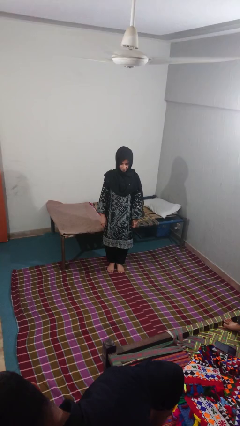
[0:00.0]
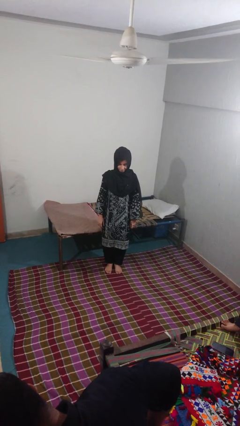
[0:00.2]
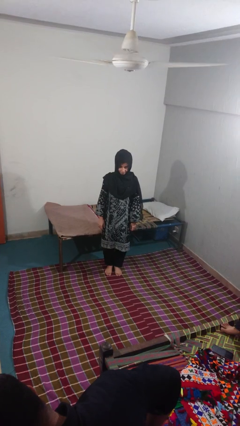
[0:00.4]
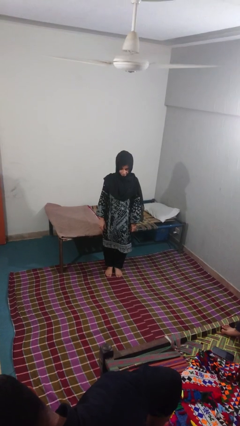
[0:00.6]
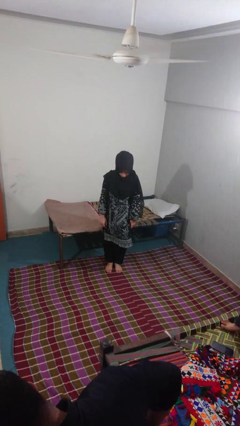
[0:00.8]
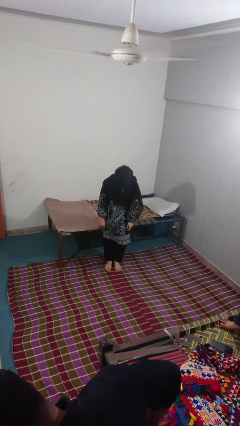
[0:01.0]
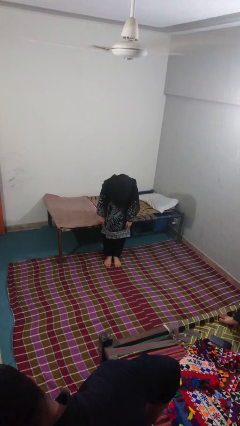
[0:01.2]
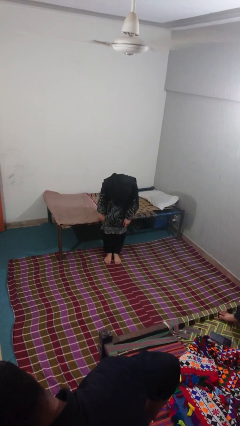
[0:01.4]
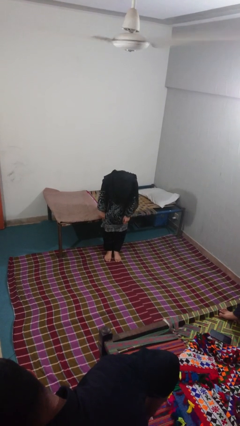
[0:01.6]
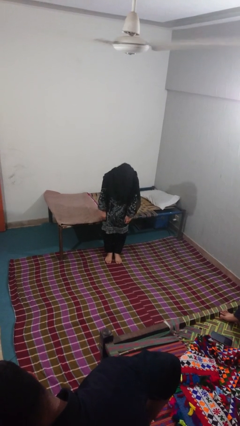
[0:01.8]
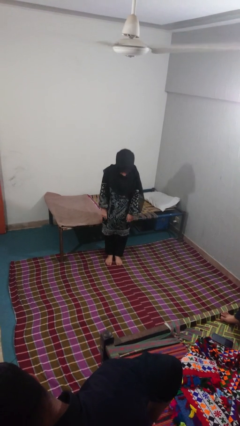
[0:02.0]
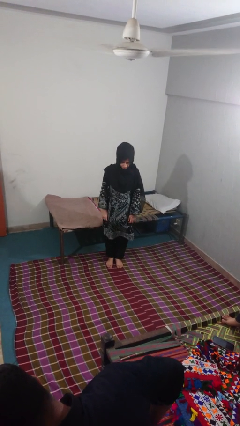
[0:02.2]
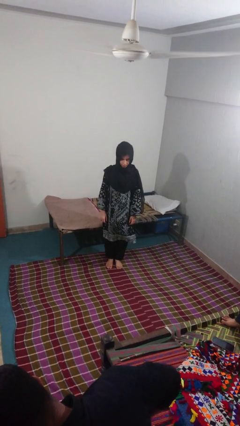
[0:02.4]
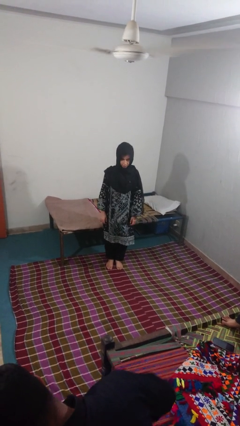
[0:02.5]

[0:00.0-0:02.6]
person bows

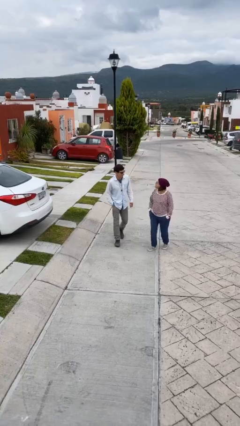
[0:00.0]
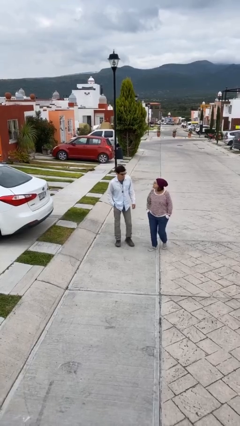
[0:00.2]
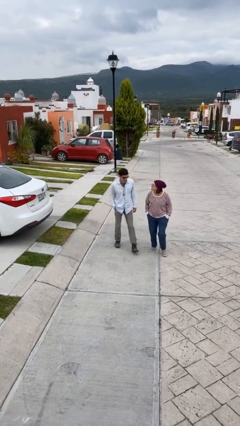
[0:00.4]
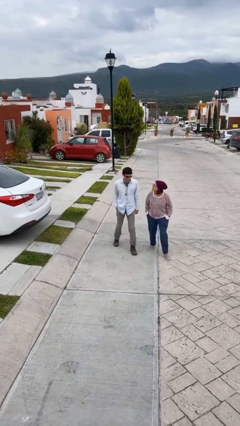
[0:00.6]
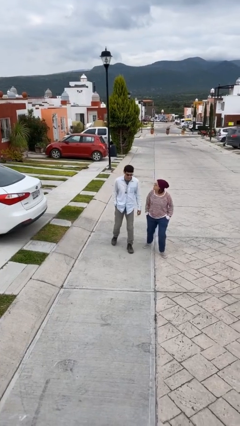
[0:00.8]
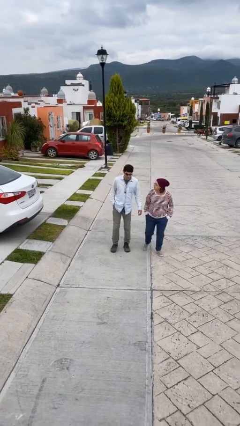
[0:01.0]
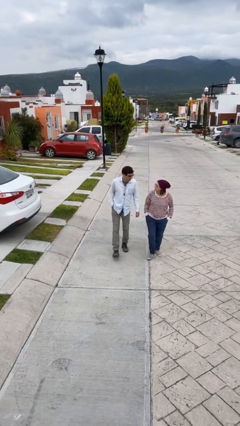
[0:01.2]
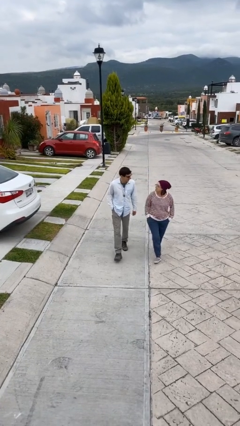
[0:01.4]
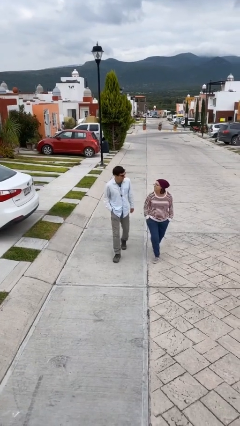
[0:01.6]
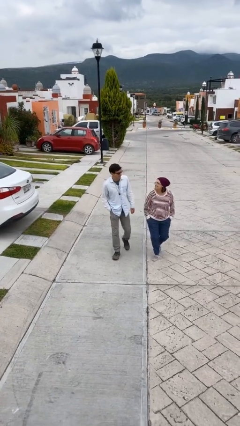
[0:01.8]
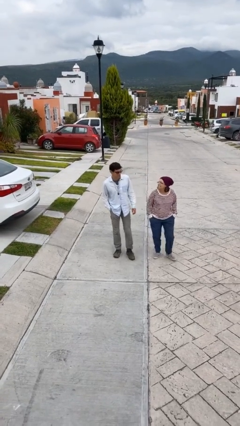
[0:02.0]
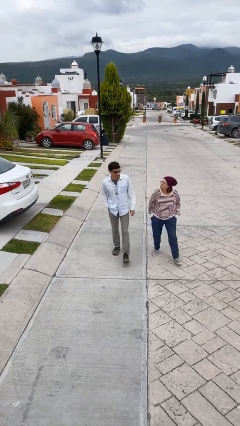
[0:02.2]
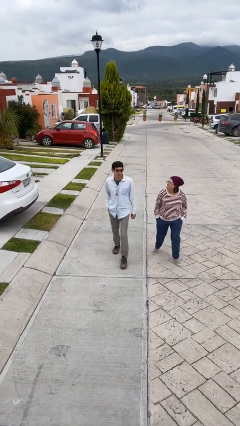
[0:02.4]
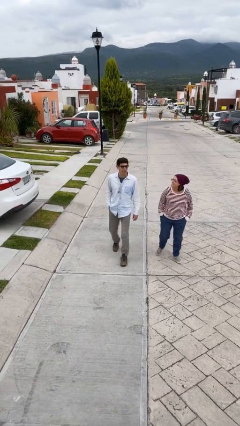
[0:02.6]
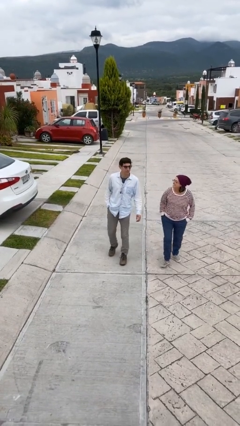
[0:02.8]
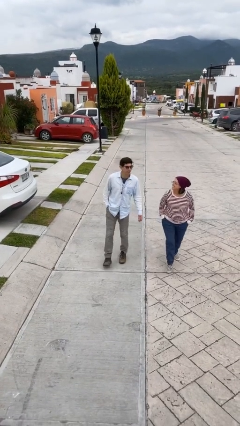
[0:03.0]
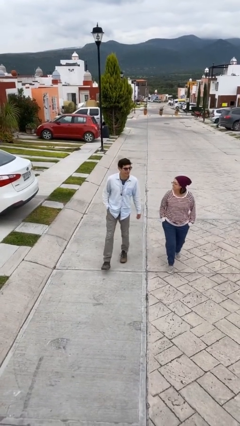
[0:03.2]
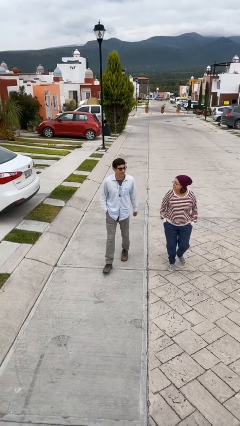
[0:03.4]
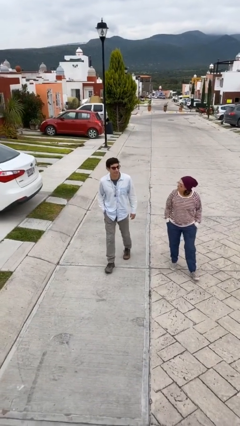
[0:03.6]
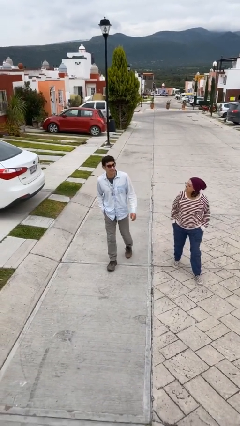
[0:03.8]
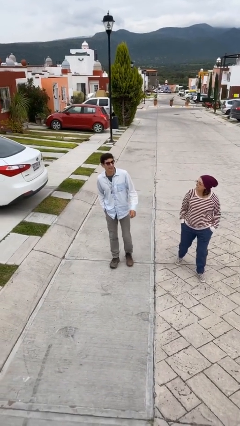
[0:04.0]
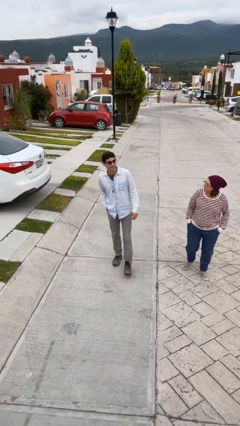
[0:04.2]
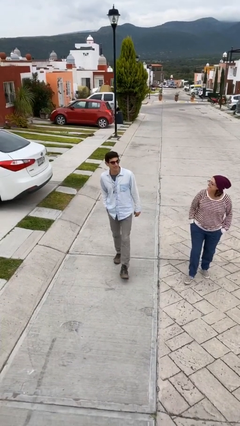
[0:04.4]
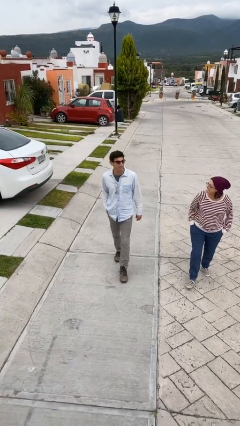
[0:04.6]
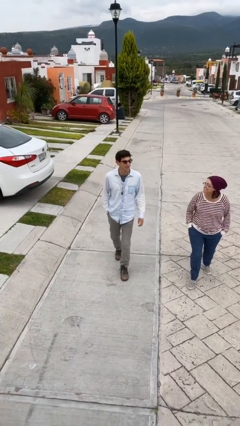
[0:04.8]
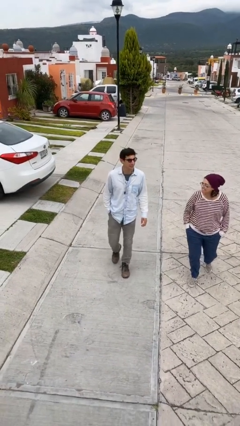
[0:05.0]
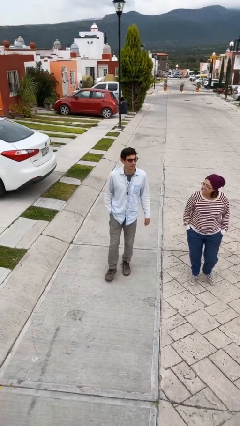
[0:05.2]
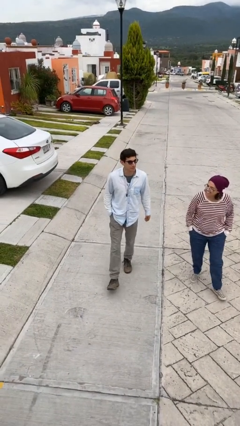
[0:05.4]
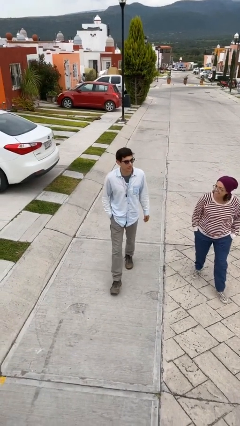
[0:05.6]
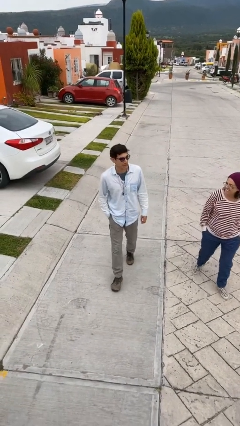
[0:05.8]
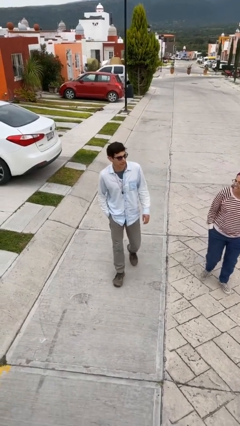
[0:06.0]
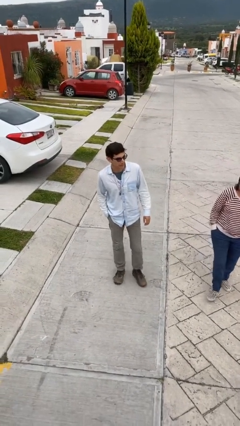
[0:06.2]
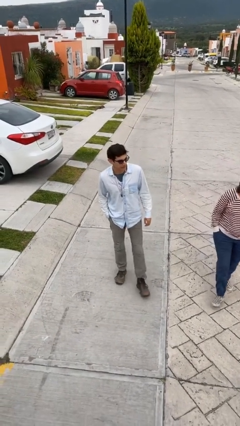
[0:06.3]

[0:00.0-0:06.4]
person talks to person

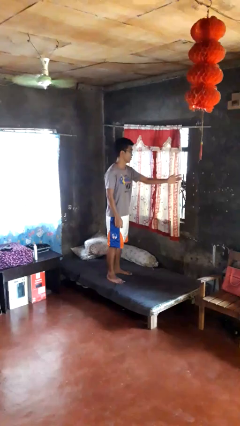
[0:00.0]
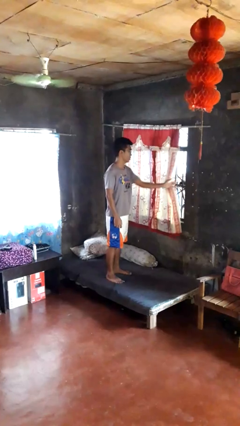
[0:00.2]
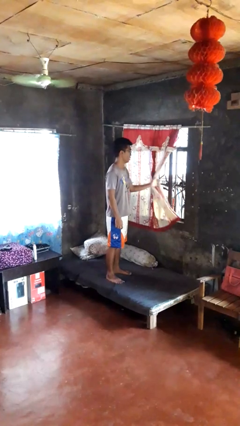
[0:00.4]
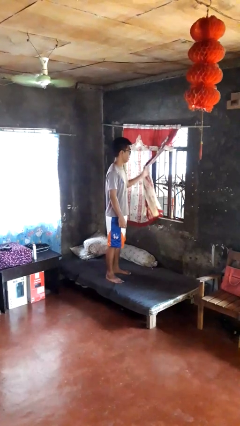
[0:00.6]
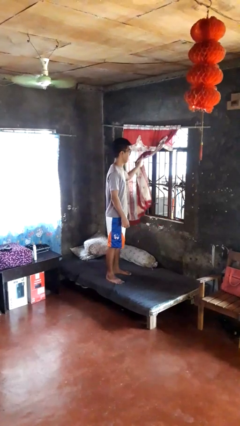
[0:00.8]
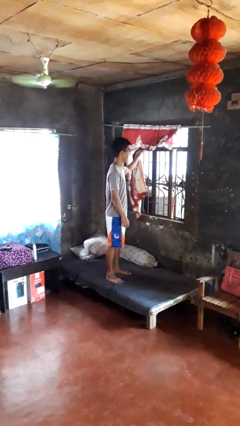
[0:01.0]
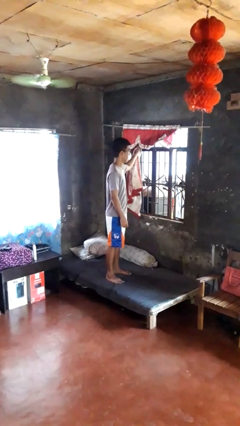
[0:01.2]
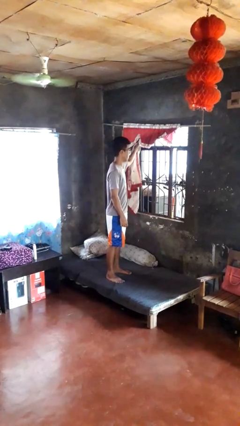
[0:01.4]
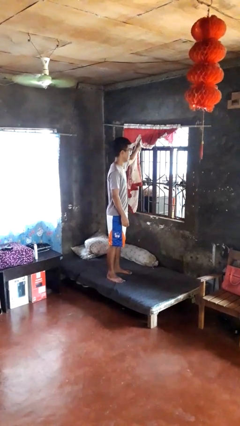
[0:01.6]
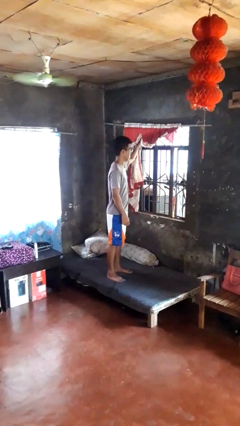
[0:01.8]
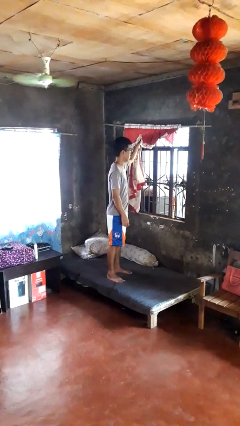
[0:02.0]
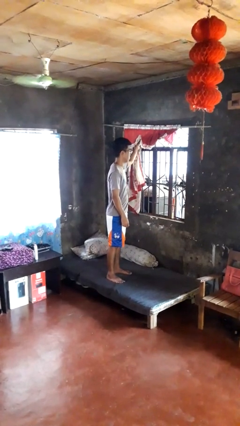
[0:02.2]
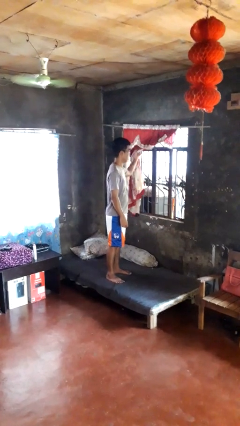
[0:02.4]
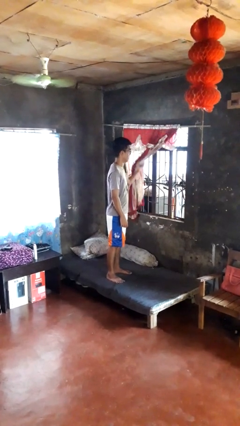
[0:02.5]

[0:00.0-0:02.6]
person opens curtains

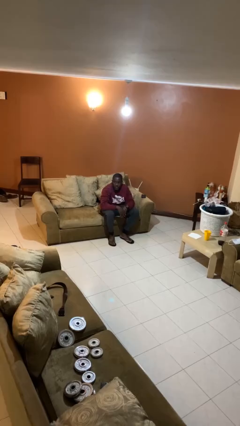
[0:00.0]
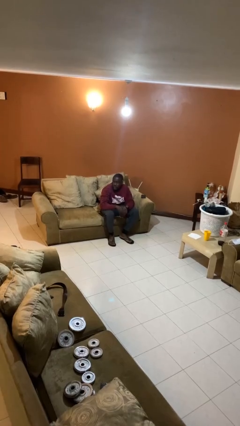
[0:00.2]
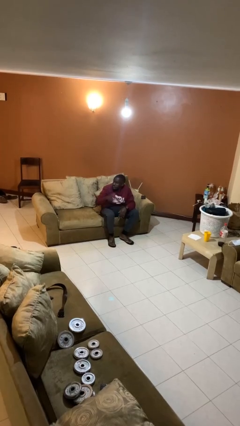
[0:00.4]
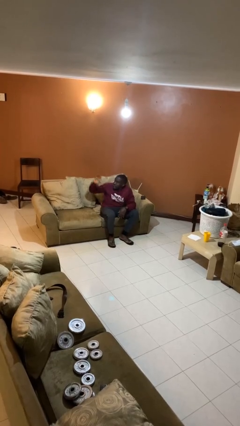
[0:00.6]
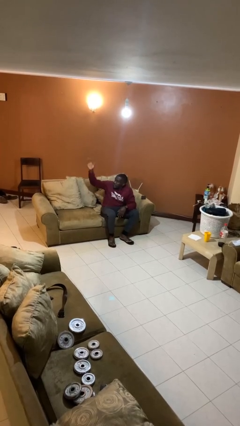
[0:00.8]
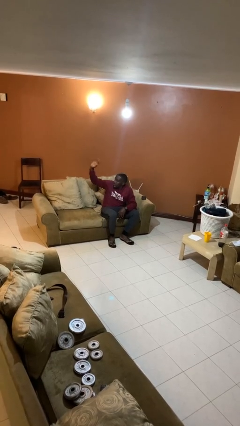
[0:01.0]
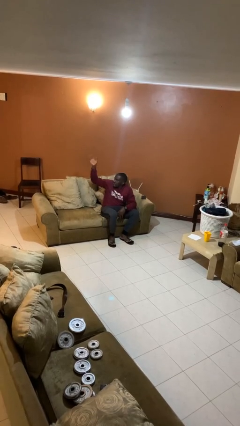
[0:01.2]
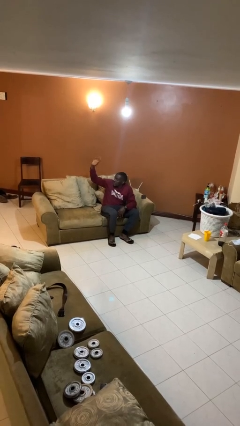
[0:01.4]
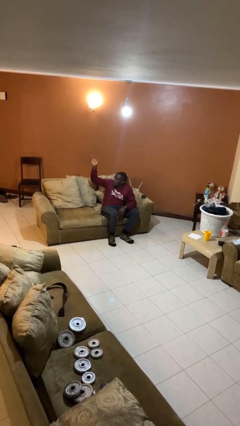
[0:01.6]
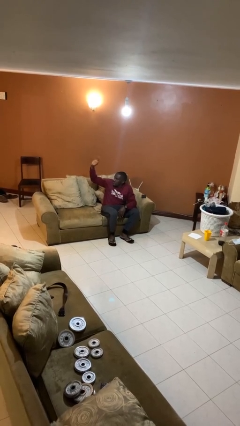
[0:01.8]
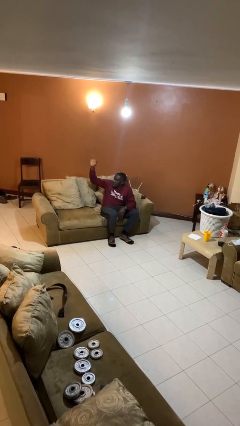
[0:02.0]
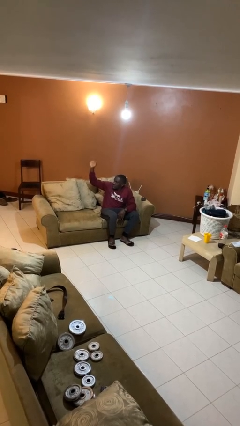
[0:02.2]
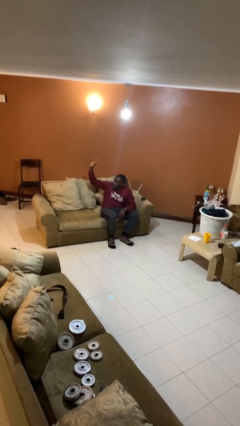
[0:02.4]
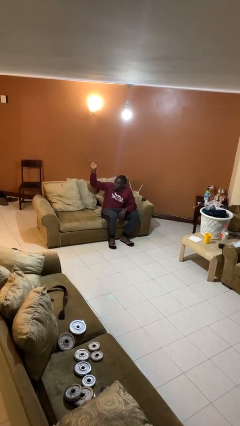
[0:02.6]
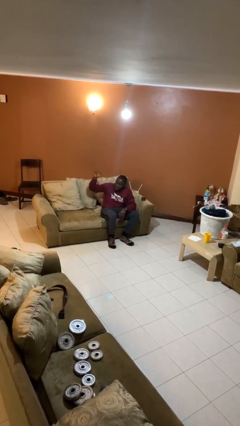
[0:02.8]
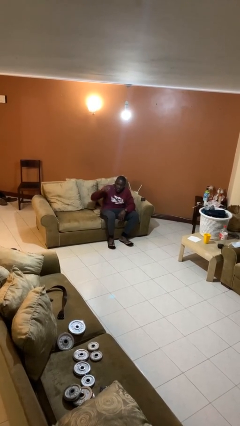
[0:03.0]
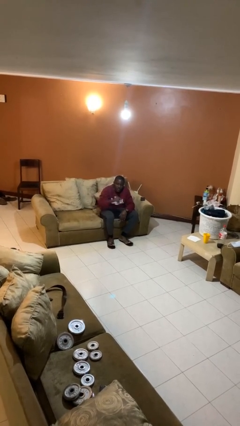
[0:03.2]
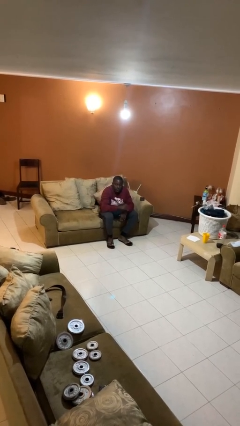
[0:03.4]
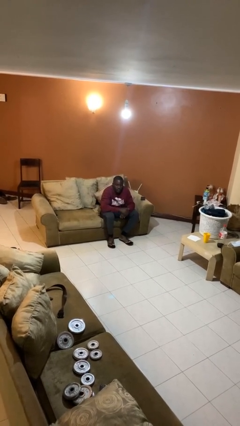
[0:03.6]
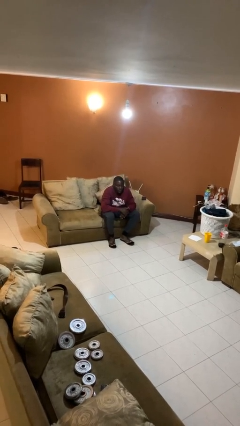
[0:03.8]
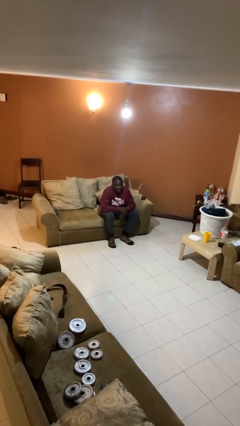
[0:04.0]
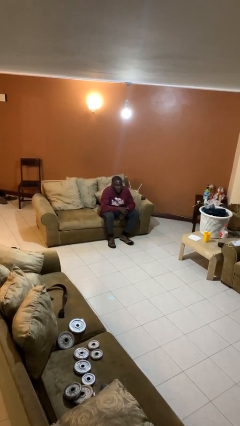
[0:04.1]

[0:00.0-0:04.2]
person waves at person

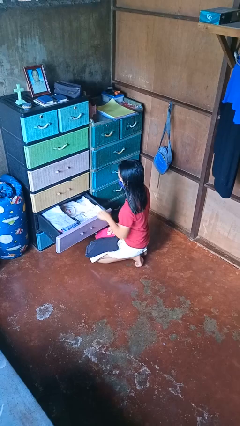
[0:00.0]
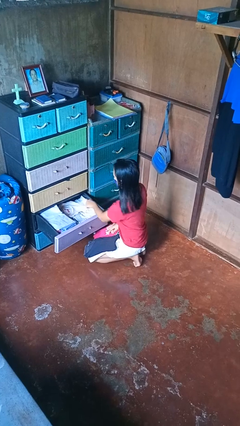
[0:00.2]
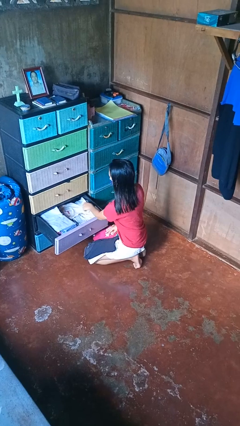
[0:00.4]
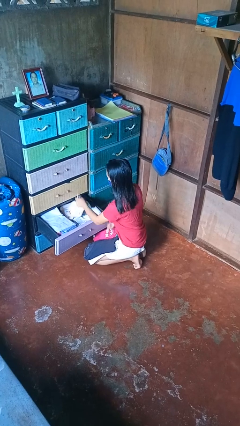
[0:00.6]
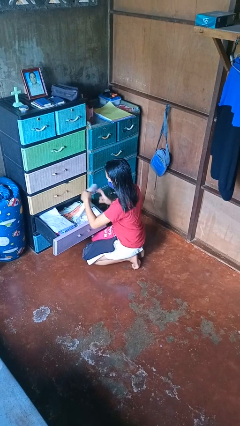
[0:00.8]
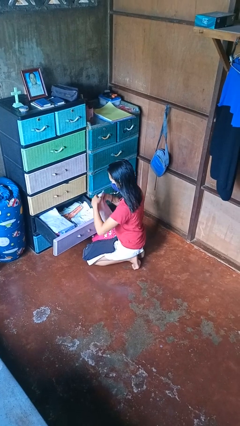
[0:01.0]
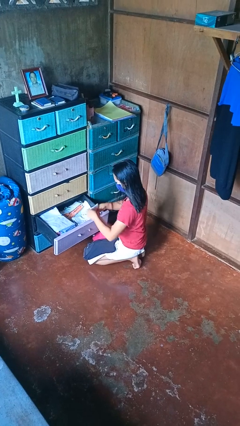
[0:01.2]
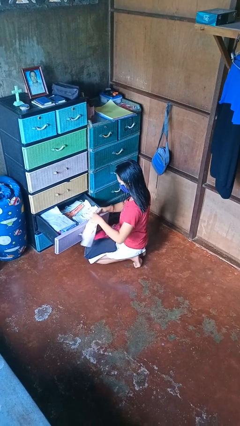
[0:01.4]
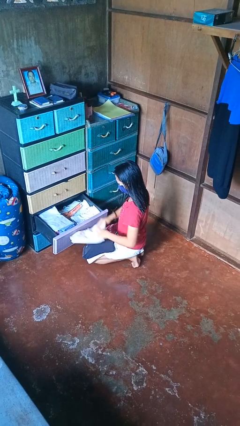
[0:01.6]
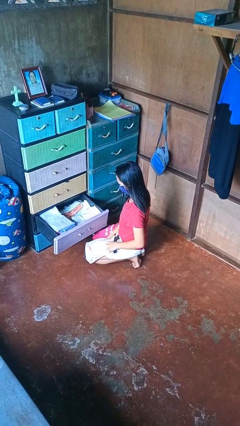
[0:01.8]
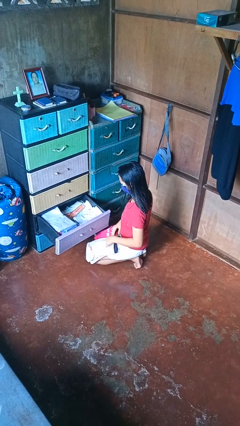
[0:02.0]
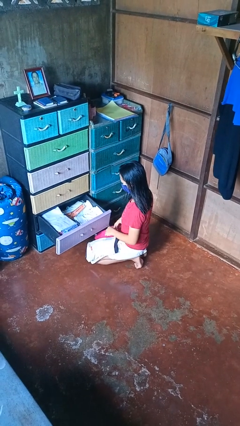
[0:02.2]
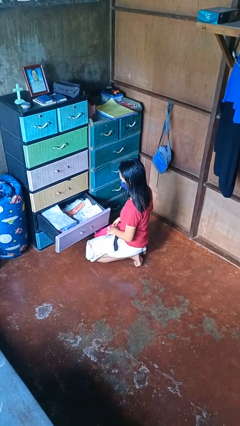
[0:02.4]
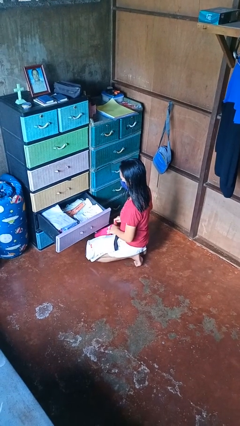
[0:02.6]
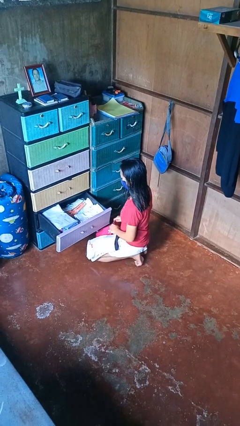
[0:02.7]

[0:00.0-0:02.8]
person takes clothes from dresser
